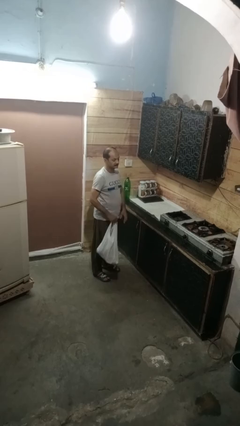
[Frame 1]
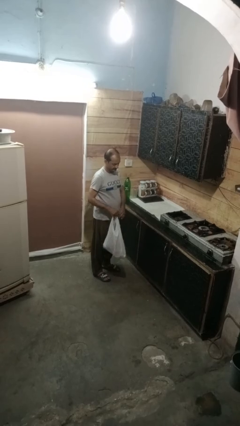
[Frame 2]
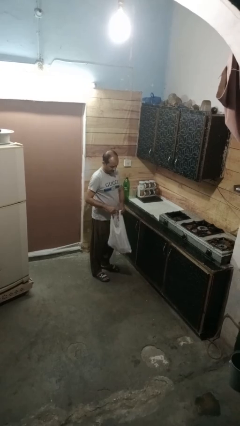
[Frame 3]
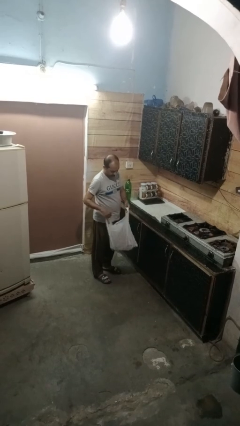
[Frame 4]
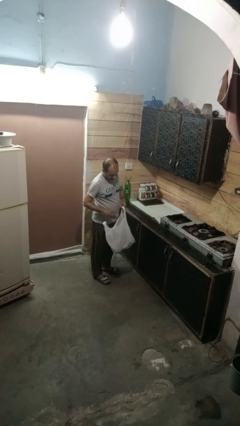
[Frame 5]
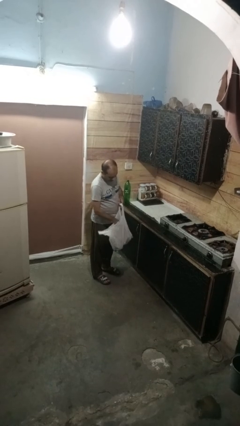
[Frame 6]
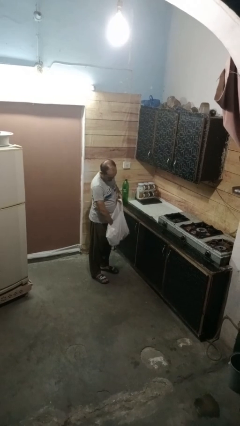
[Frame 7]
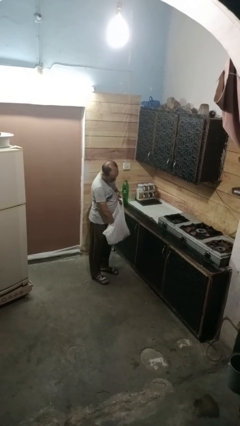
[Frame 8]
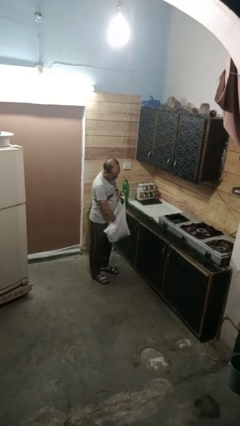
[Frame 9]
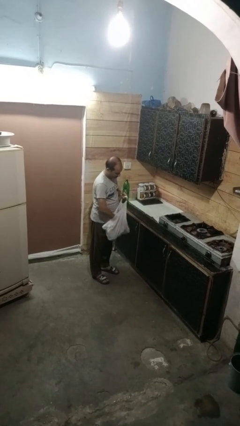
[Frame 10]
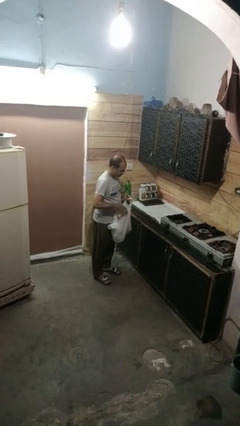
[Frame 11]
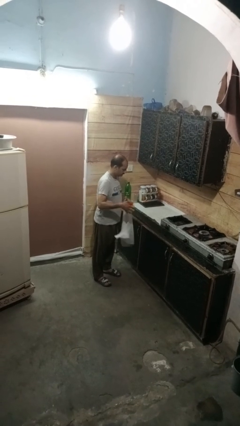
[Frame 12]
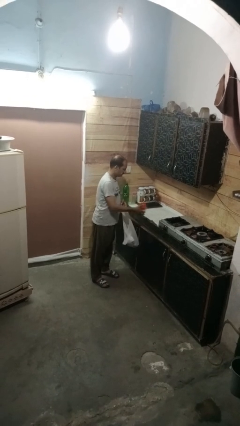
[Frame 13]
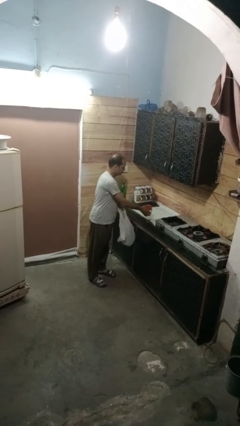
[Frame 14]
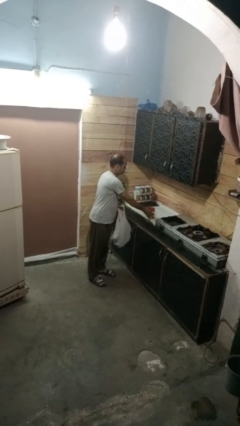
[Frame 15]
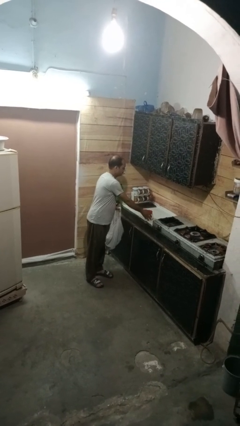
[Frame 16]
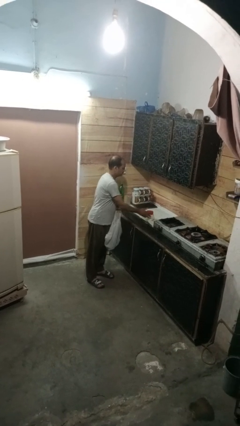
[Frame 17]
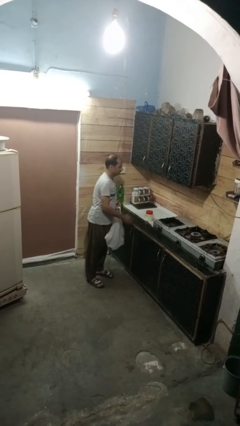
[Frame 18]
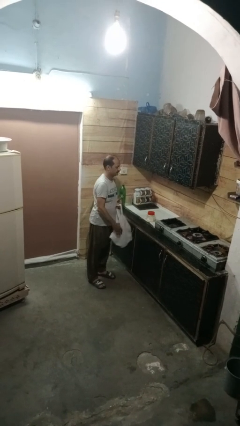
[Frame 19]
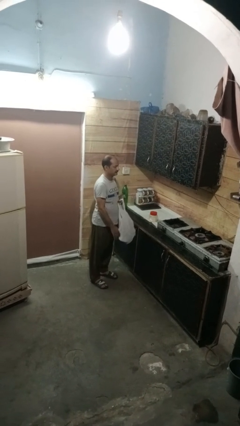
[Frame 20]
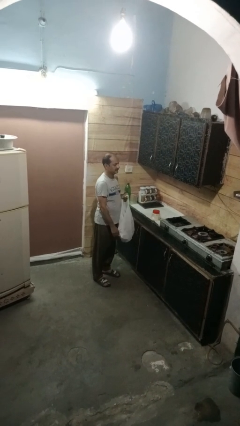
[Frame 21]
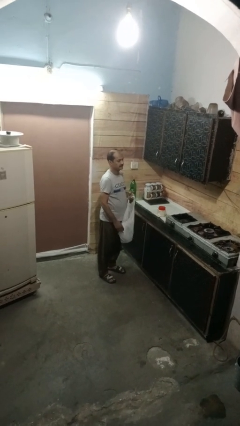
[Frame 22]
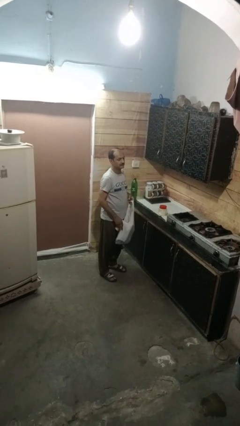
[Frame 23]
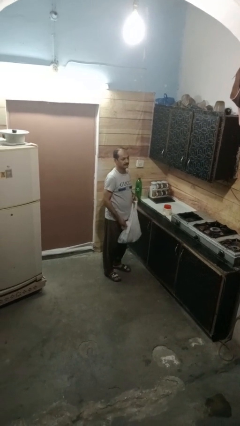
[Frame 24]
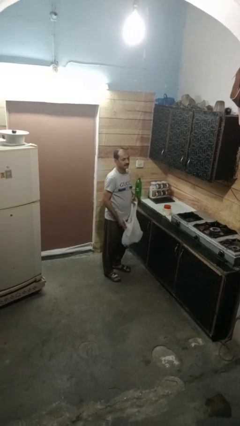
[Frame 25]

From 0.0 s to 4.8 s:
person takes object from bag

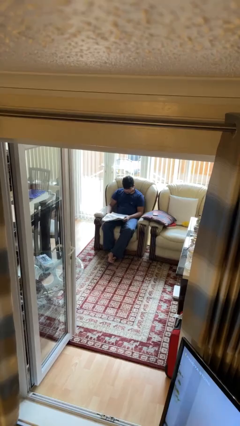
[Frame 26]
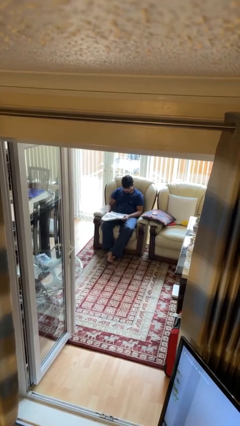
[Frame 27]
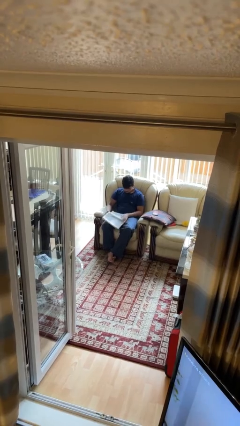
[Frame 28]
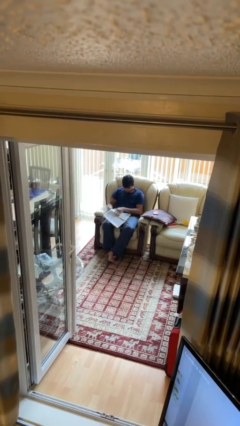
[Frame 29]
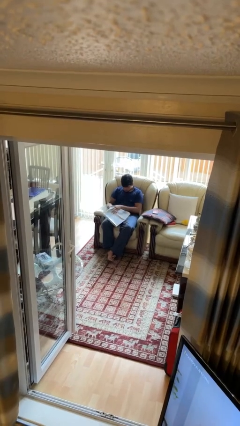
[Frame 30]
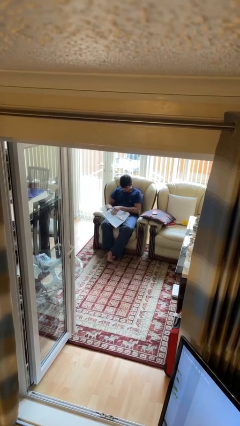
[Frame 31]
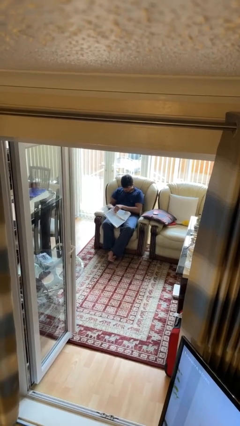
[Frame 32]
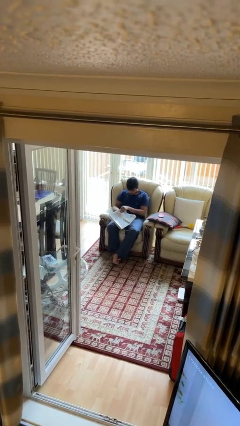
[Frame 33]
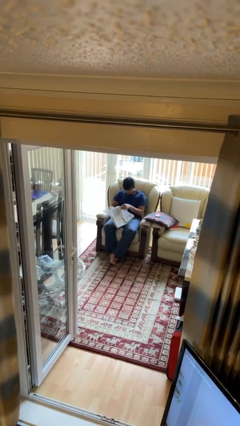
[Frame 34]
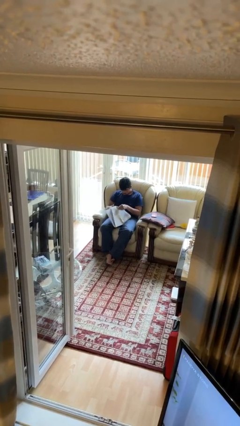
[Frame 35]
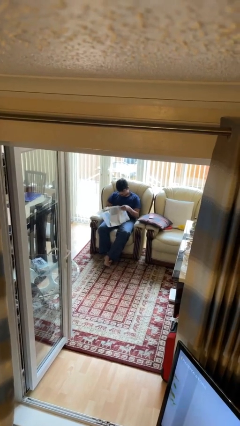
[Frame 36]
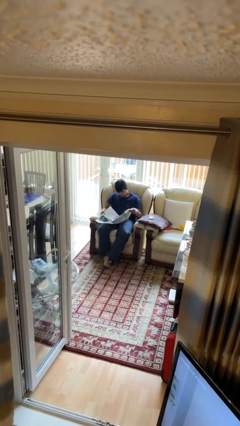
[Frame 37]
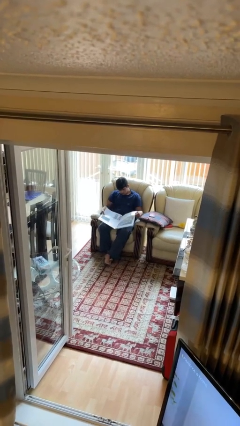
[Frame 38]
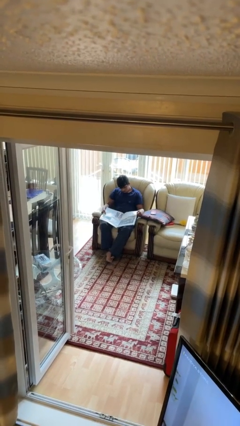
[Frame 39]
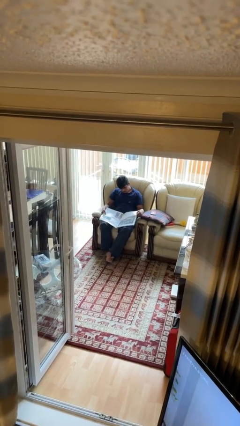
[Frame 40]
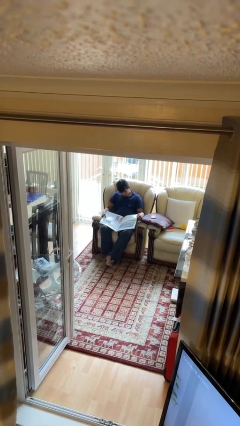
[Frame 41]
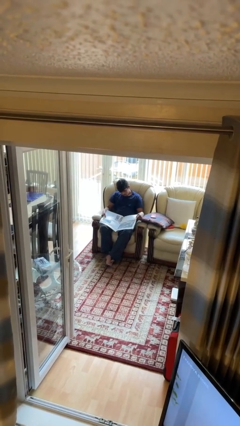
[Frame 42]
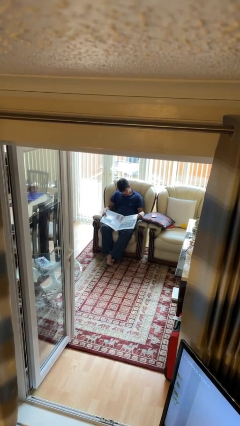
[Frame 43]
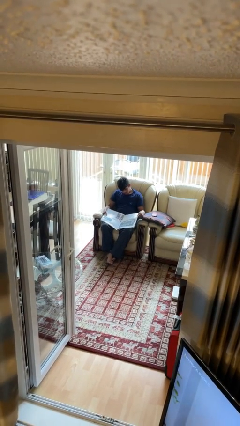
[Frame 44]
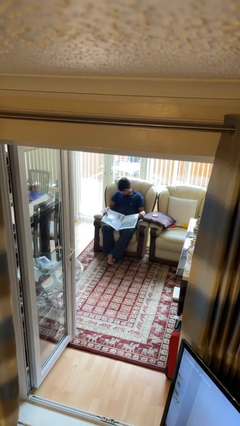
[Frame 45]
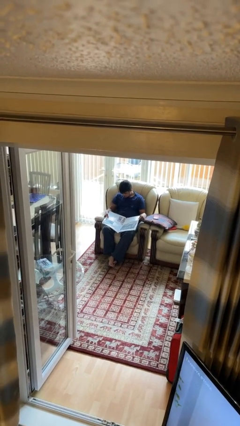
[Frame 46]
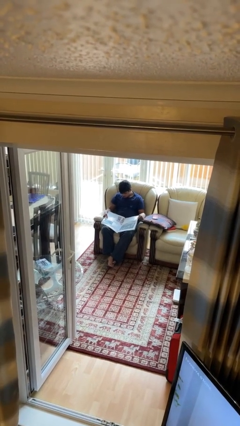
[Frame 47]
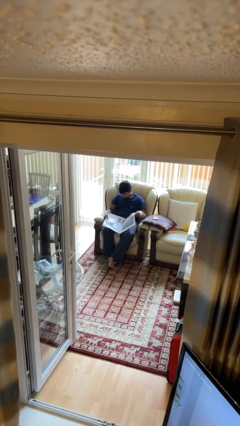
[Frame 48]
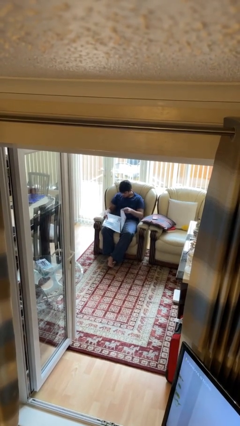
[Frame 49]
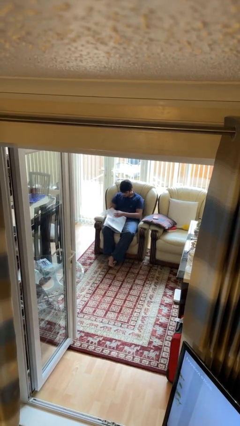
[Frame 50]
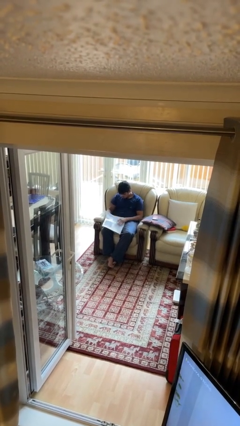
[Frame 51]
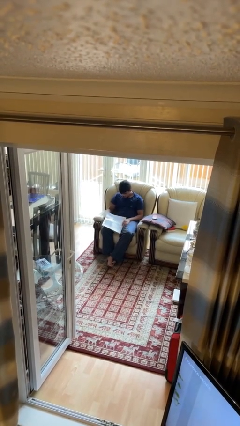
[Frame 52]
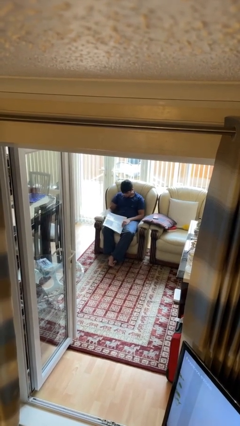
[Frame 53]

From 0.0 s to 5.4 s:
person reads newspaper

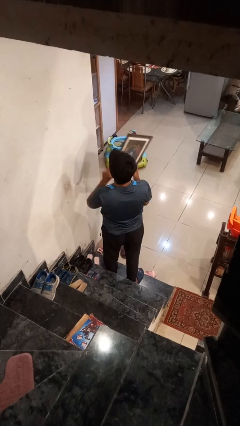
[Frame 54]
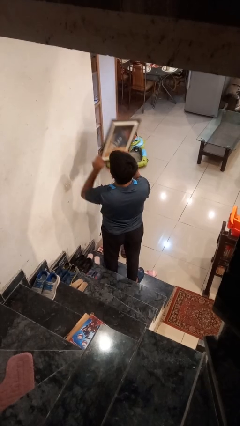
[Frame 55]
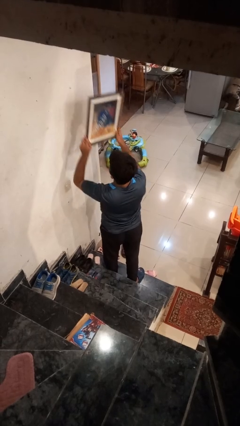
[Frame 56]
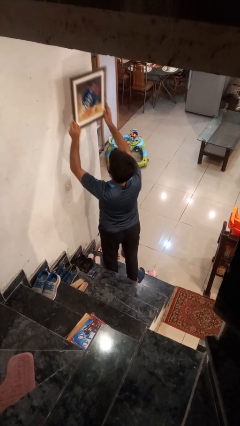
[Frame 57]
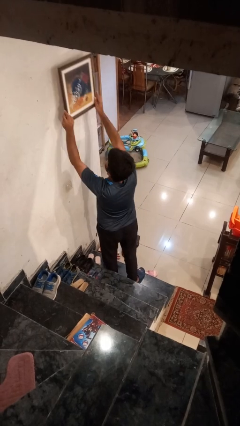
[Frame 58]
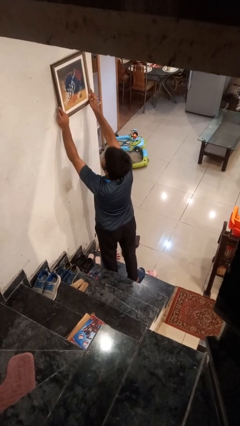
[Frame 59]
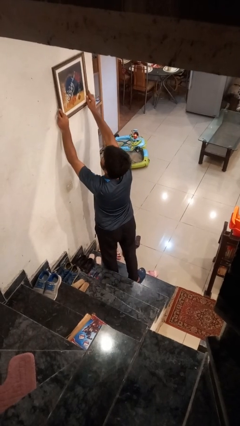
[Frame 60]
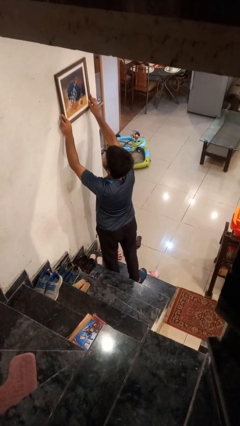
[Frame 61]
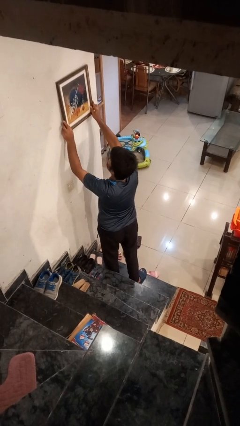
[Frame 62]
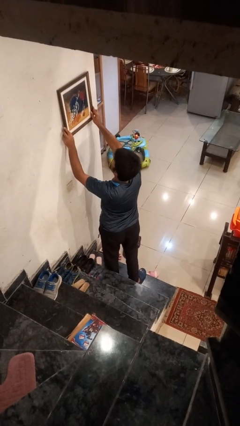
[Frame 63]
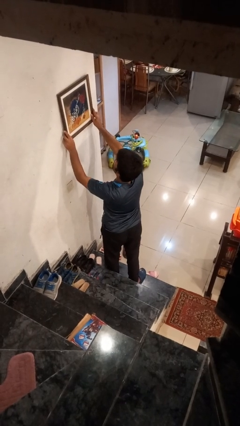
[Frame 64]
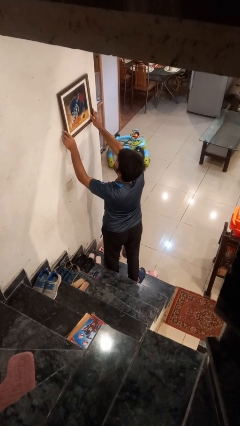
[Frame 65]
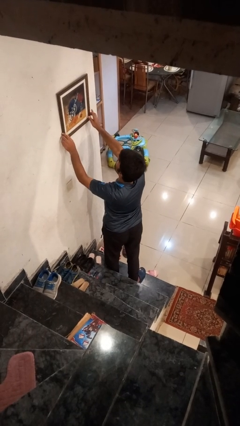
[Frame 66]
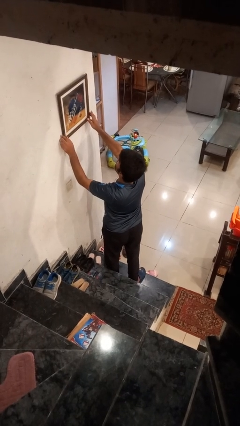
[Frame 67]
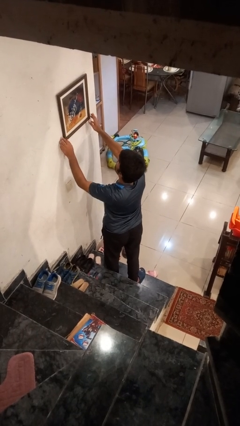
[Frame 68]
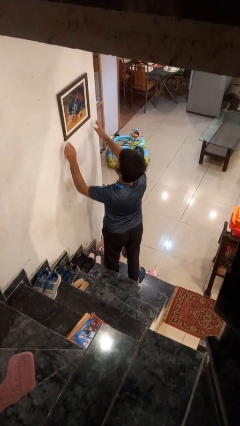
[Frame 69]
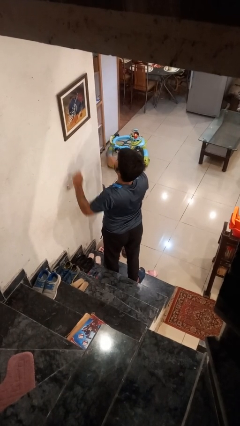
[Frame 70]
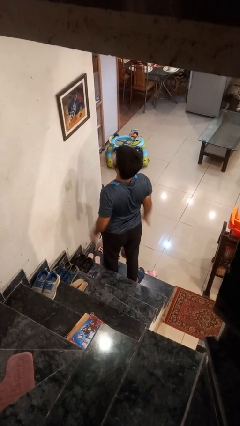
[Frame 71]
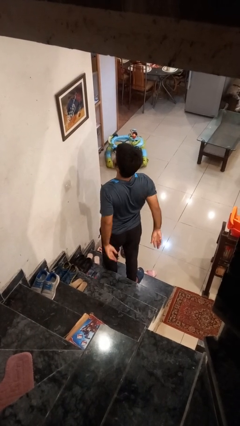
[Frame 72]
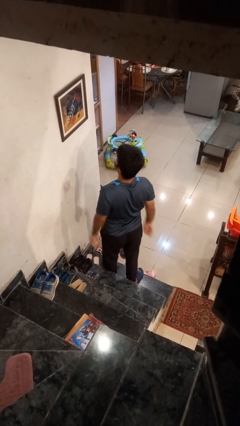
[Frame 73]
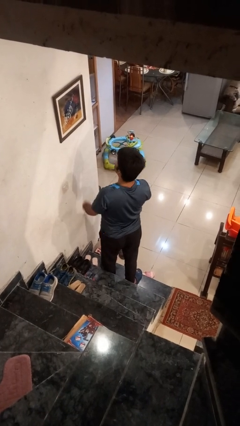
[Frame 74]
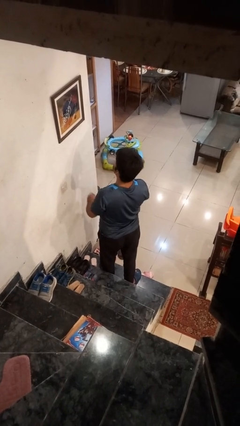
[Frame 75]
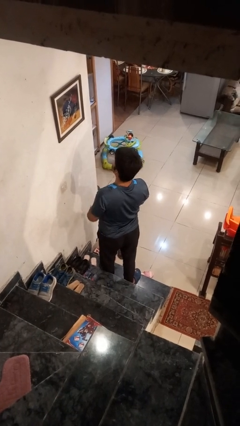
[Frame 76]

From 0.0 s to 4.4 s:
person puts up picture frame

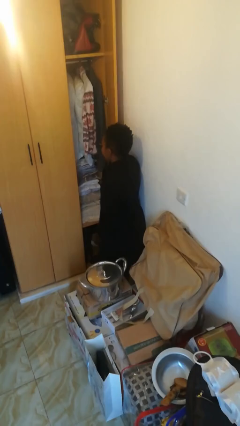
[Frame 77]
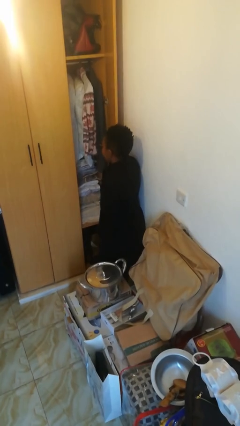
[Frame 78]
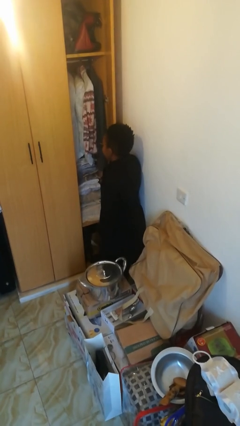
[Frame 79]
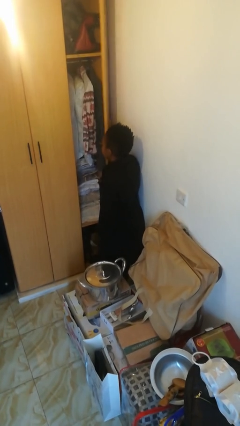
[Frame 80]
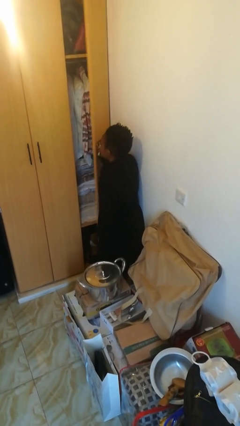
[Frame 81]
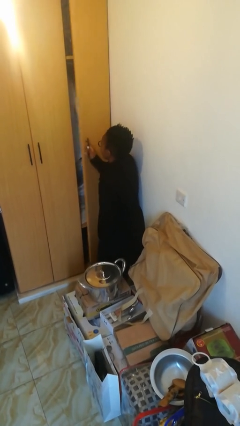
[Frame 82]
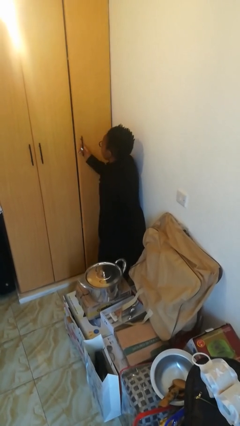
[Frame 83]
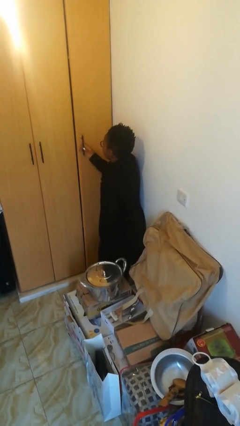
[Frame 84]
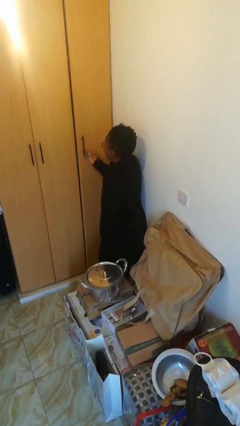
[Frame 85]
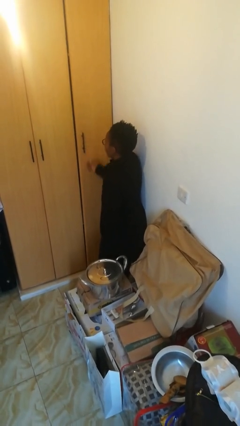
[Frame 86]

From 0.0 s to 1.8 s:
person closes closet door

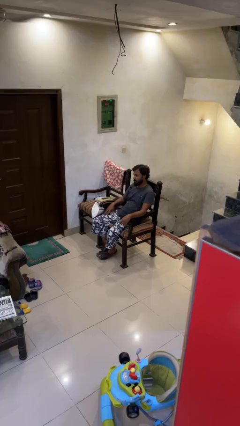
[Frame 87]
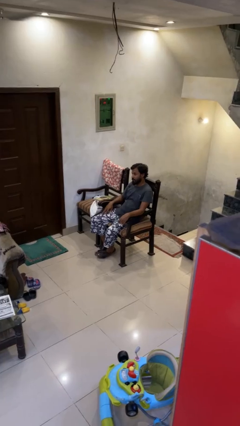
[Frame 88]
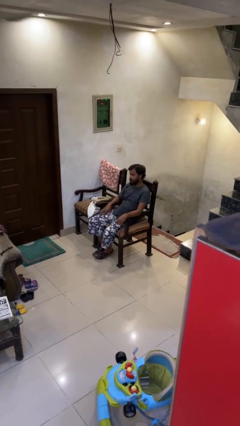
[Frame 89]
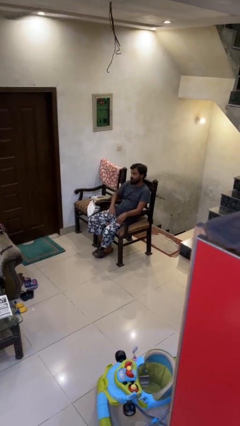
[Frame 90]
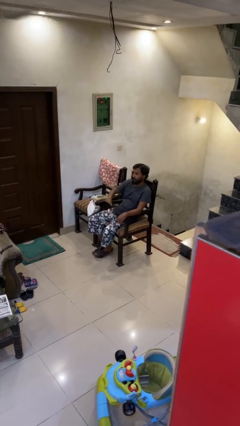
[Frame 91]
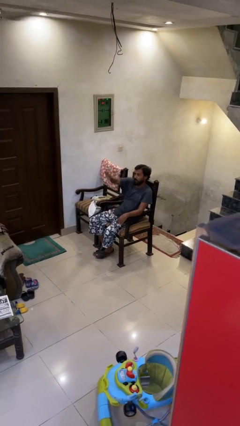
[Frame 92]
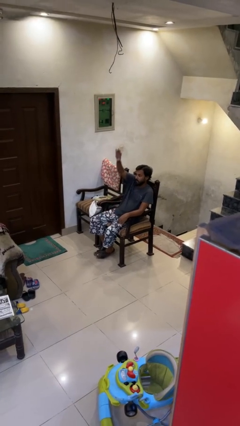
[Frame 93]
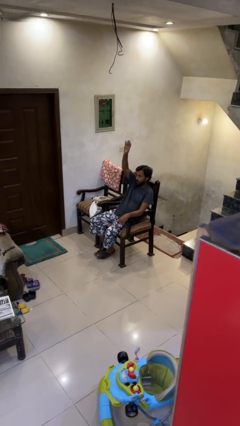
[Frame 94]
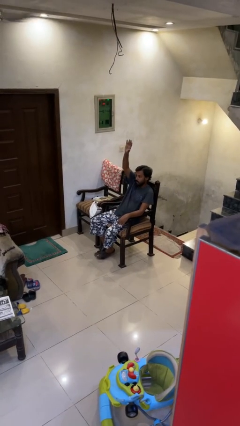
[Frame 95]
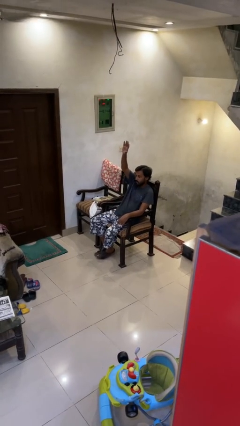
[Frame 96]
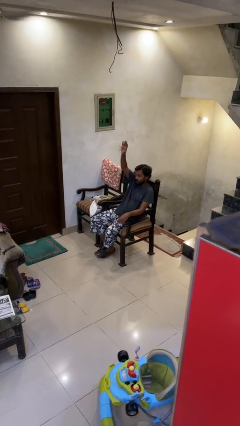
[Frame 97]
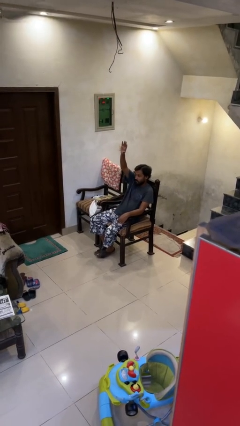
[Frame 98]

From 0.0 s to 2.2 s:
person gestures swipe up
